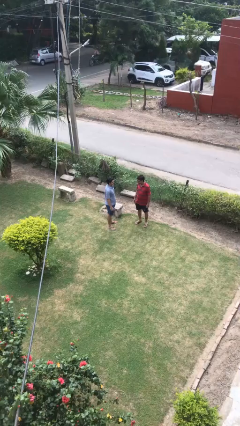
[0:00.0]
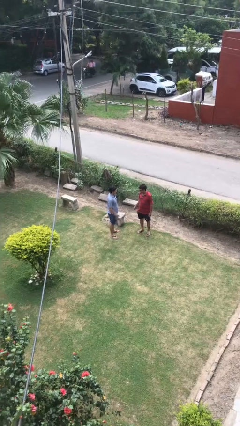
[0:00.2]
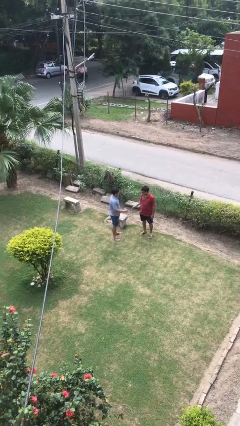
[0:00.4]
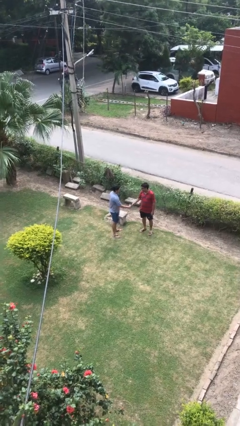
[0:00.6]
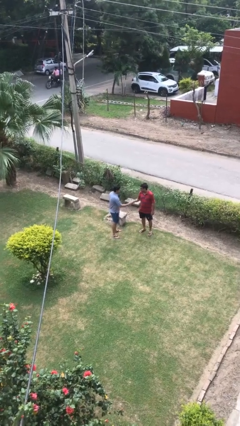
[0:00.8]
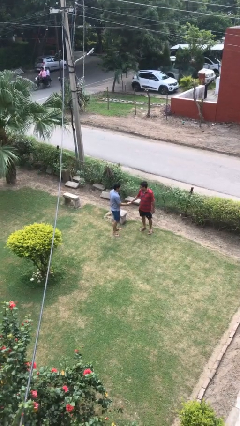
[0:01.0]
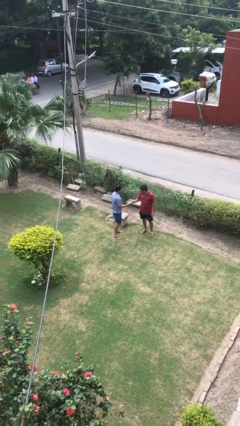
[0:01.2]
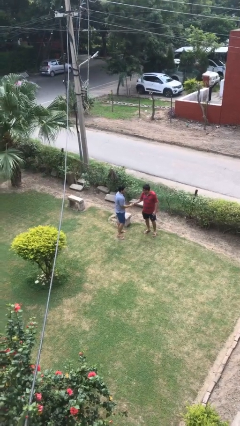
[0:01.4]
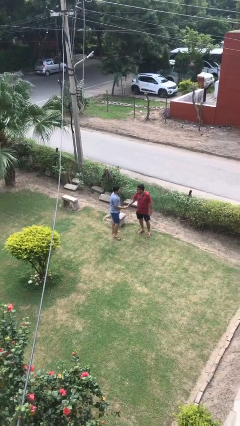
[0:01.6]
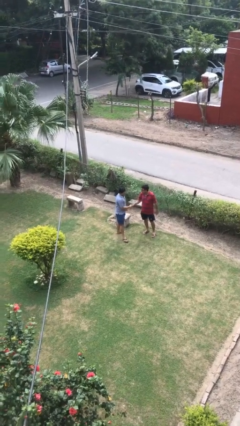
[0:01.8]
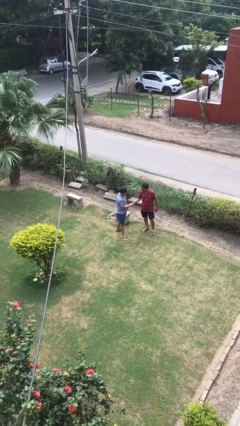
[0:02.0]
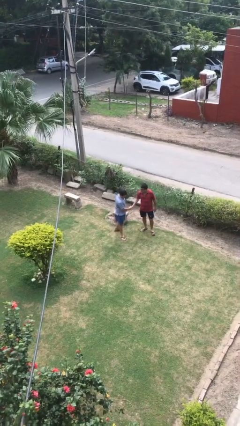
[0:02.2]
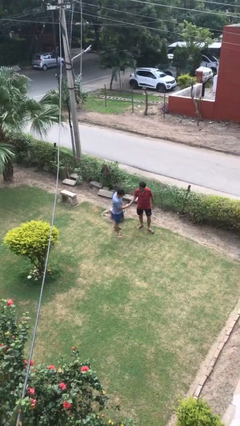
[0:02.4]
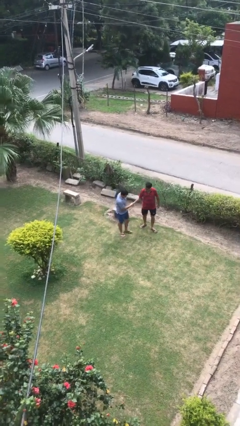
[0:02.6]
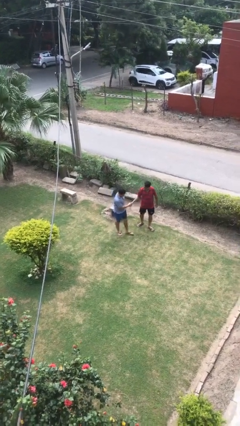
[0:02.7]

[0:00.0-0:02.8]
person shakes hand

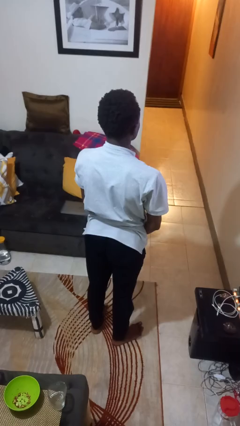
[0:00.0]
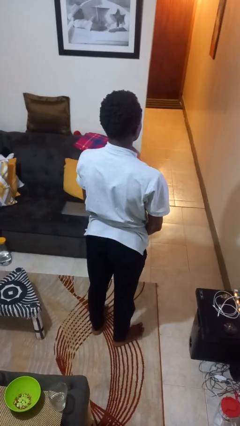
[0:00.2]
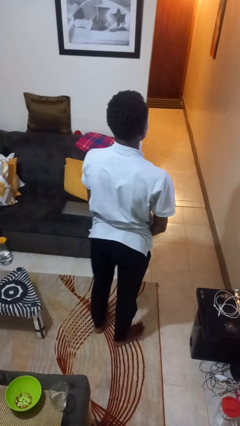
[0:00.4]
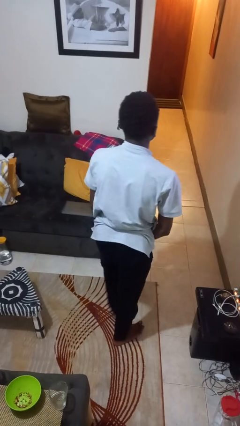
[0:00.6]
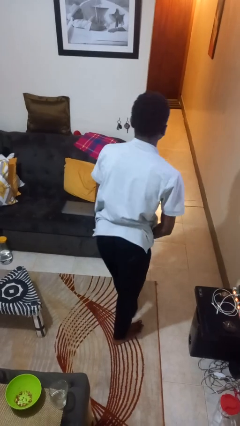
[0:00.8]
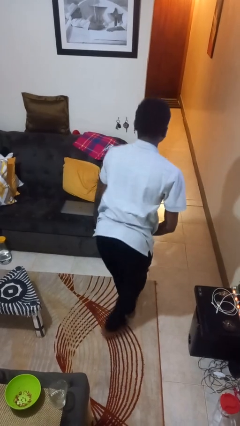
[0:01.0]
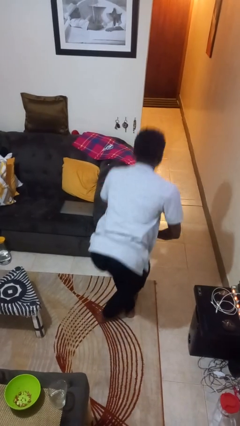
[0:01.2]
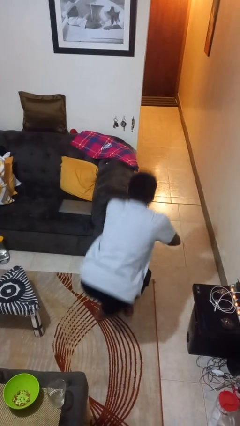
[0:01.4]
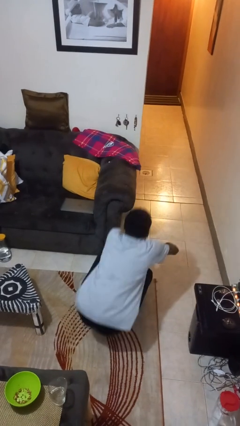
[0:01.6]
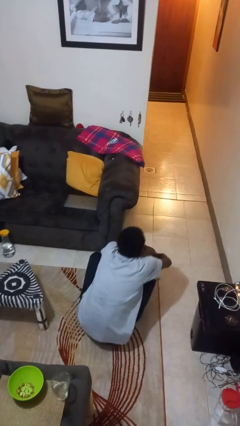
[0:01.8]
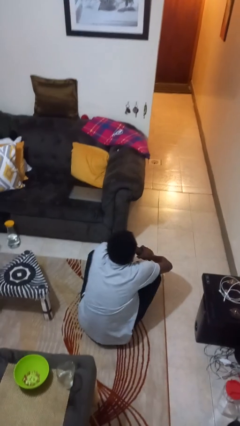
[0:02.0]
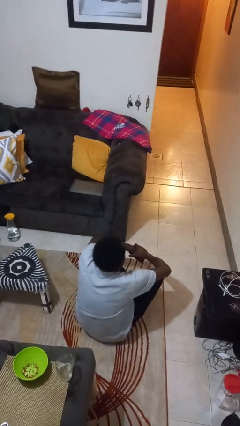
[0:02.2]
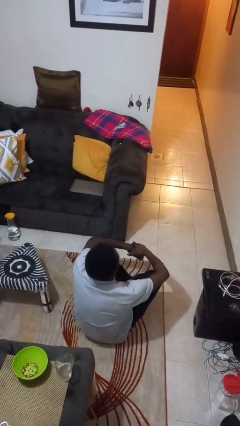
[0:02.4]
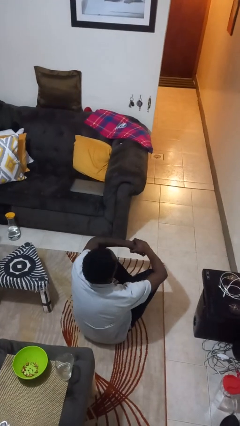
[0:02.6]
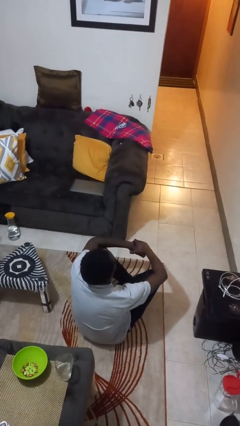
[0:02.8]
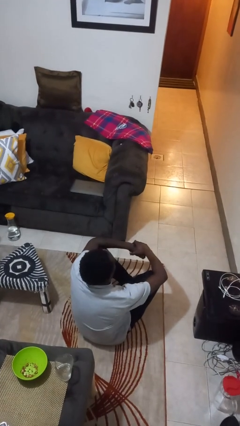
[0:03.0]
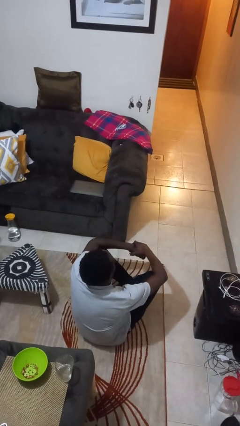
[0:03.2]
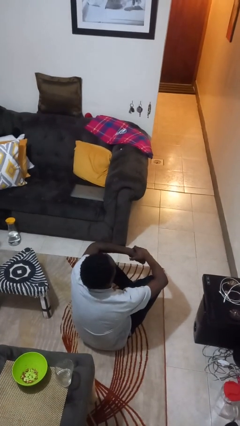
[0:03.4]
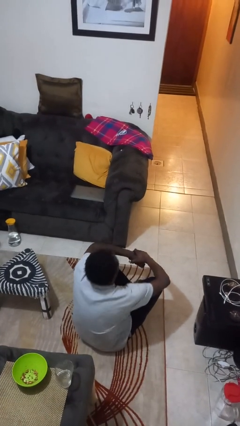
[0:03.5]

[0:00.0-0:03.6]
person sits crisscross

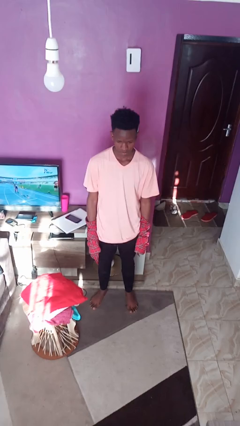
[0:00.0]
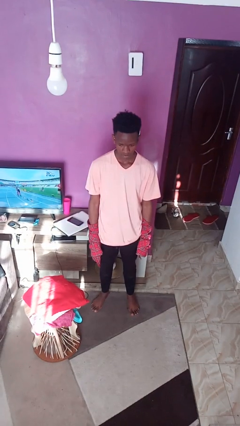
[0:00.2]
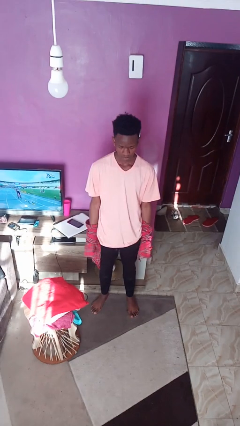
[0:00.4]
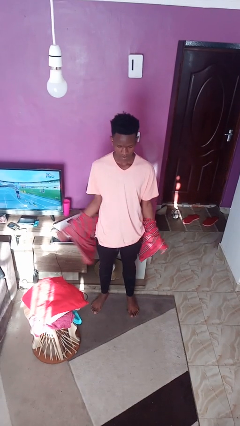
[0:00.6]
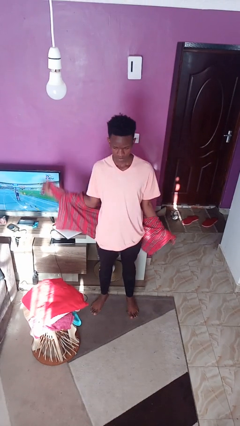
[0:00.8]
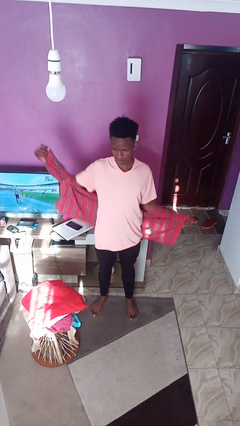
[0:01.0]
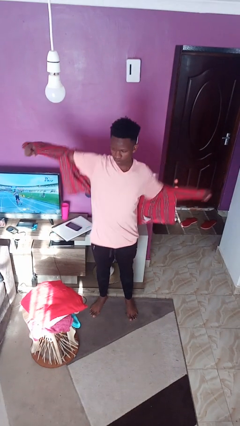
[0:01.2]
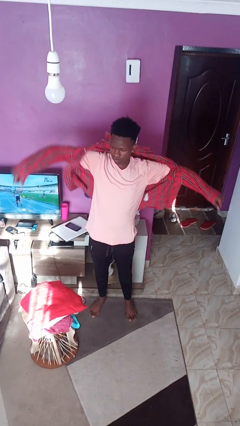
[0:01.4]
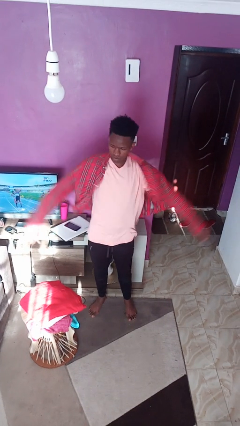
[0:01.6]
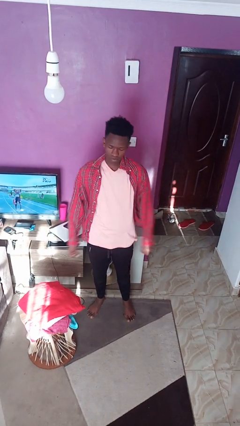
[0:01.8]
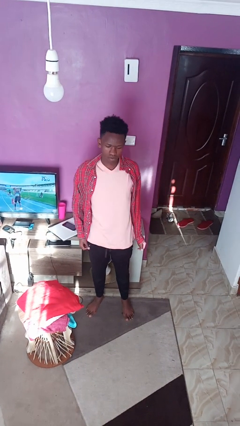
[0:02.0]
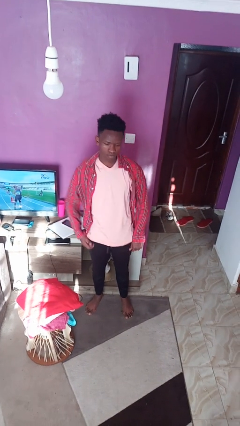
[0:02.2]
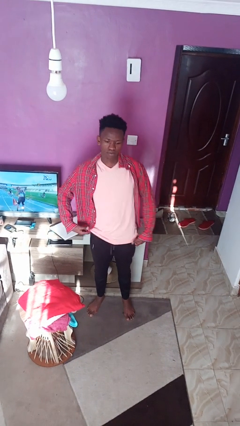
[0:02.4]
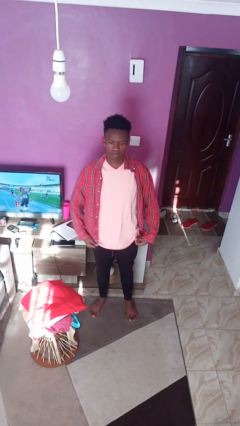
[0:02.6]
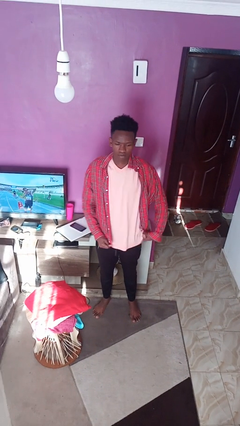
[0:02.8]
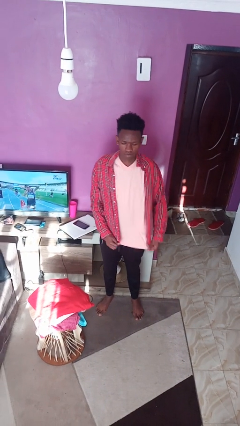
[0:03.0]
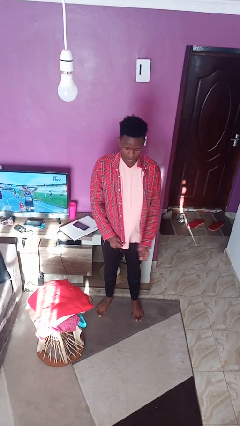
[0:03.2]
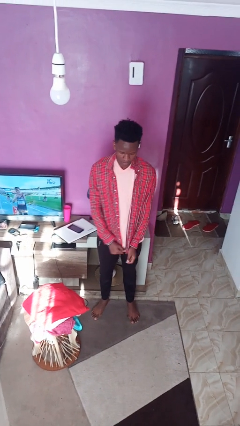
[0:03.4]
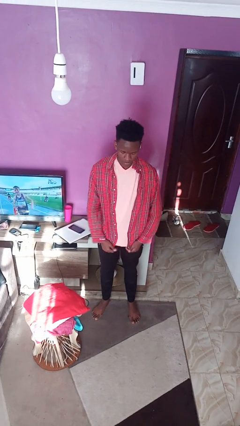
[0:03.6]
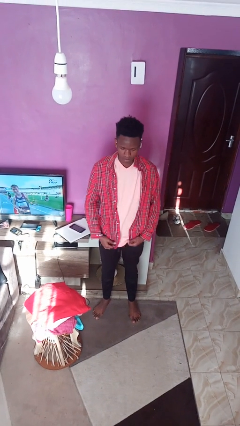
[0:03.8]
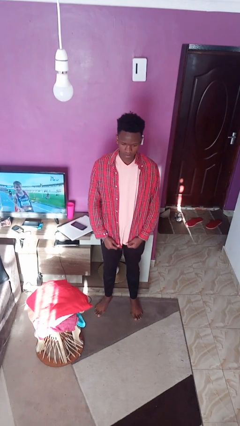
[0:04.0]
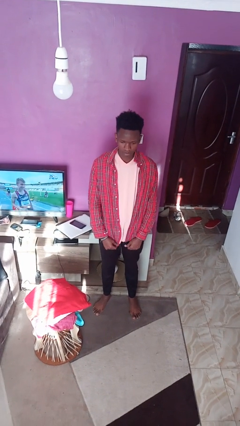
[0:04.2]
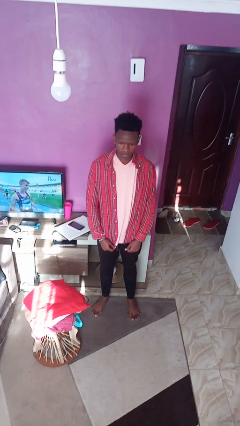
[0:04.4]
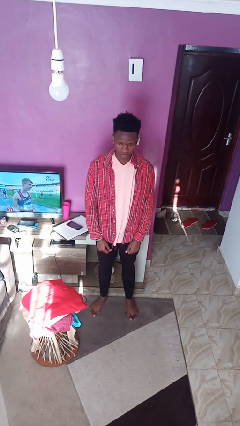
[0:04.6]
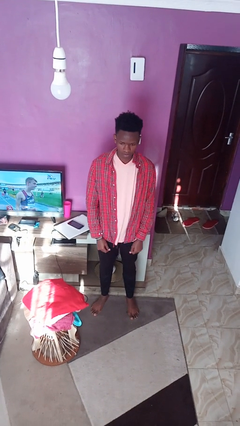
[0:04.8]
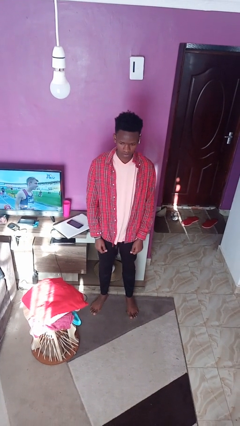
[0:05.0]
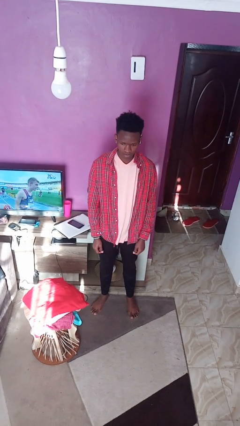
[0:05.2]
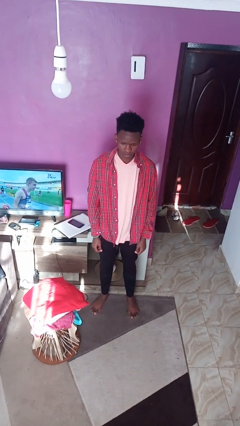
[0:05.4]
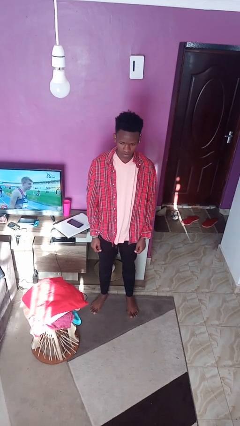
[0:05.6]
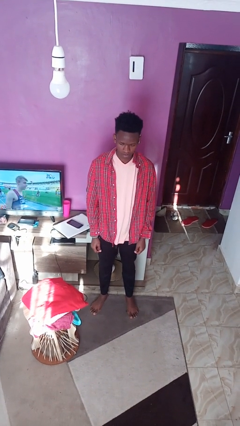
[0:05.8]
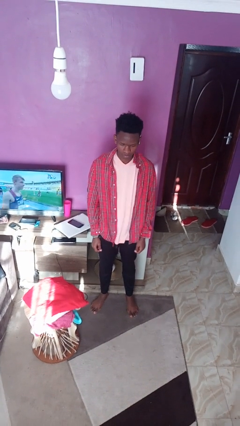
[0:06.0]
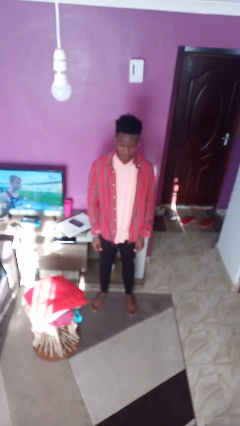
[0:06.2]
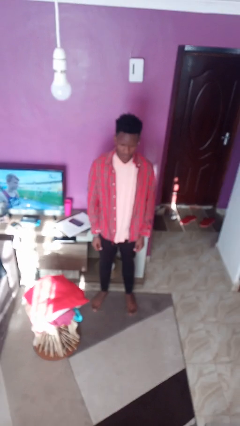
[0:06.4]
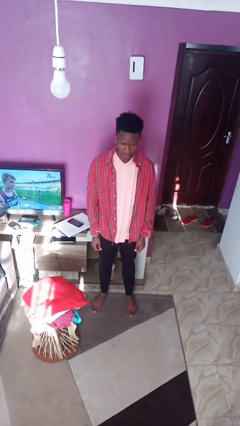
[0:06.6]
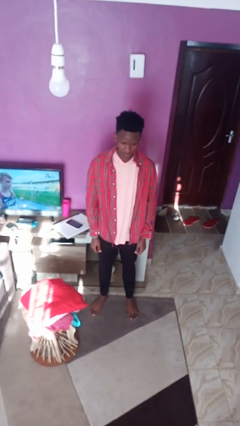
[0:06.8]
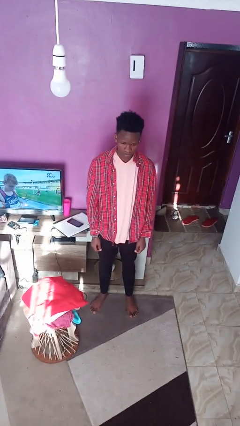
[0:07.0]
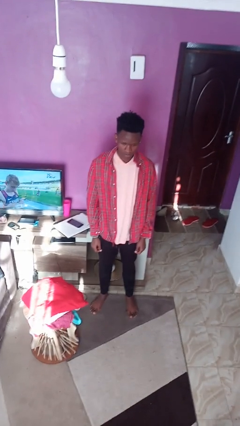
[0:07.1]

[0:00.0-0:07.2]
person puts on shirt

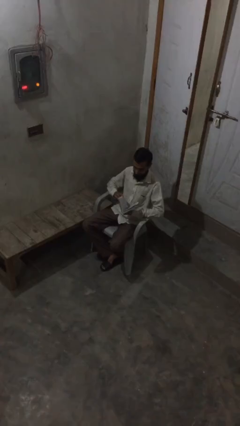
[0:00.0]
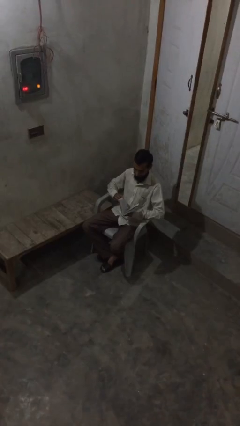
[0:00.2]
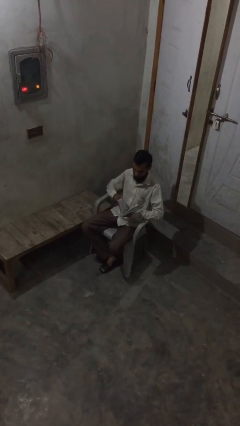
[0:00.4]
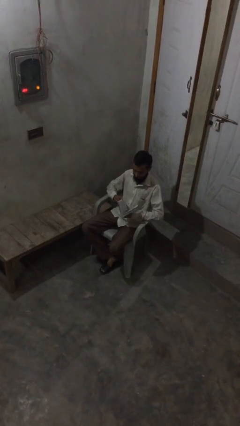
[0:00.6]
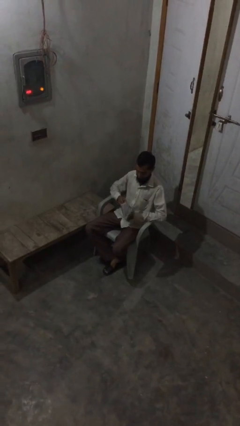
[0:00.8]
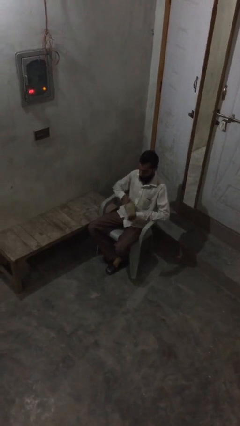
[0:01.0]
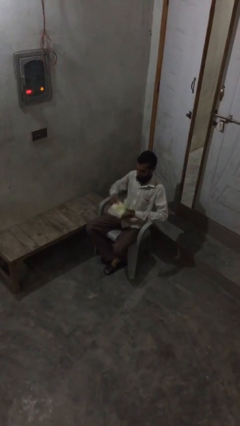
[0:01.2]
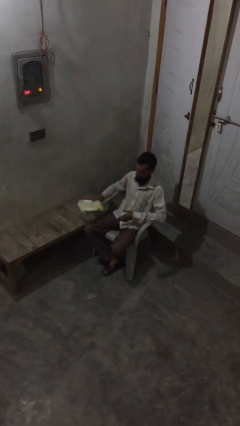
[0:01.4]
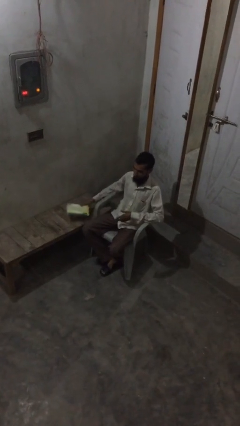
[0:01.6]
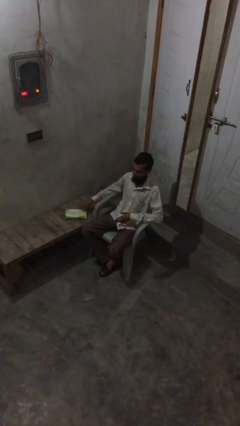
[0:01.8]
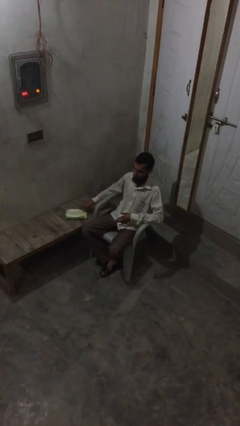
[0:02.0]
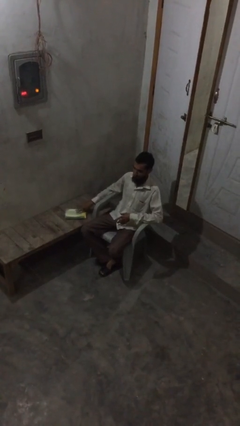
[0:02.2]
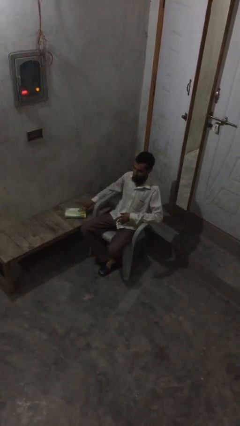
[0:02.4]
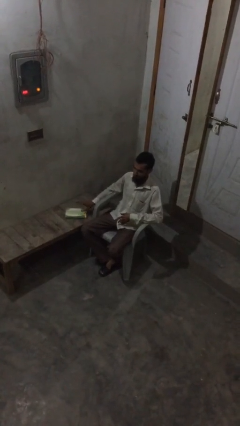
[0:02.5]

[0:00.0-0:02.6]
person puts down object on table

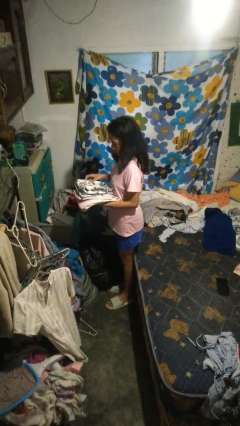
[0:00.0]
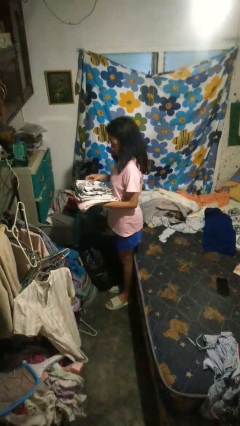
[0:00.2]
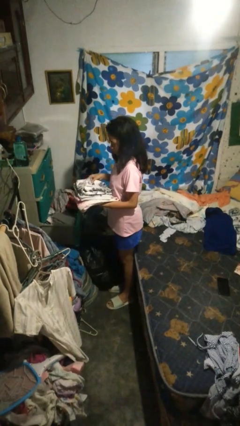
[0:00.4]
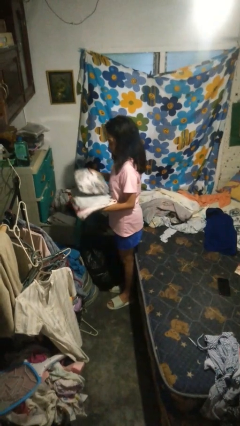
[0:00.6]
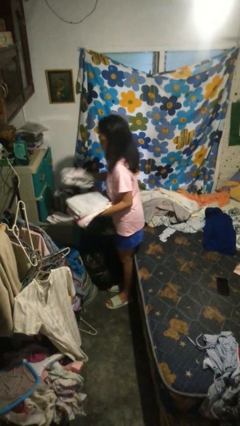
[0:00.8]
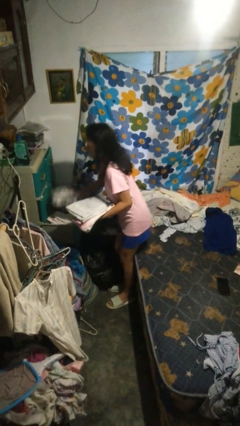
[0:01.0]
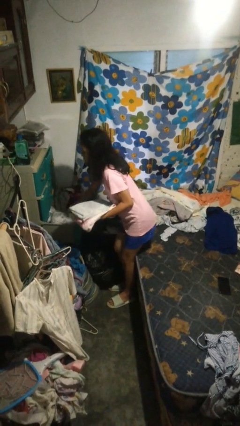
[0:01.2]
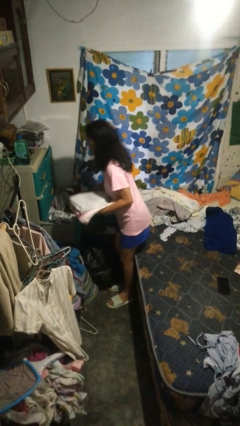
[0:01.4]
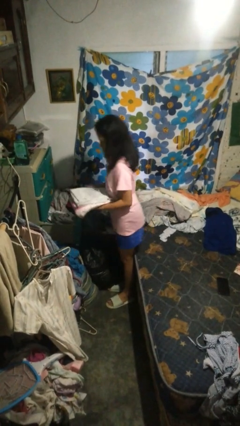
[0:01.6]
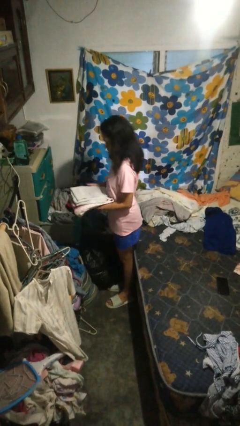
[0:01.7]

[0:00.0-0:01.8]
person puts clothes into dresser
